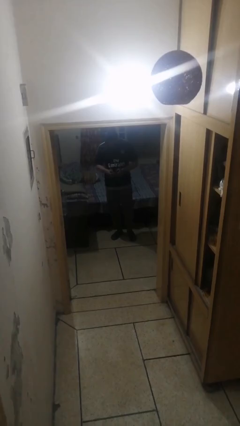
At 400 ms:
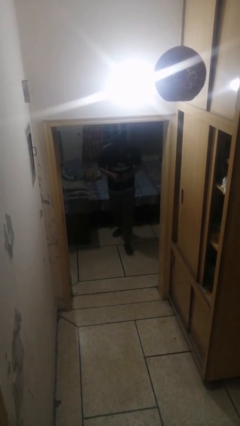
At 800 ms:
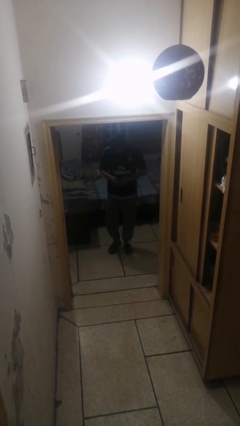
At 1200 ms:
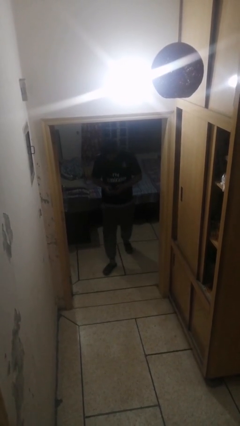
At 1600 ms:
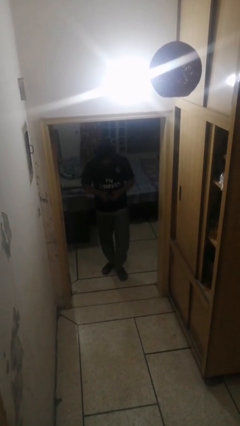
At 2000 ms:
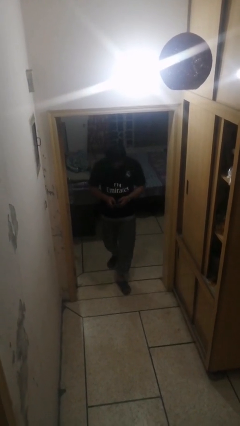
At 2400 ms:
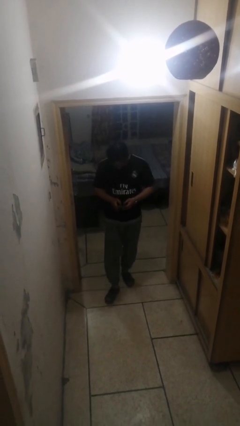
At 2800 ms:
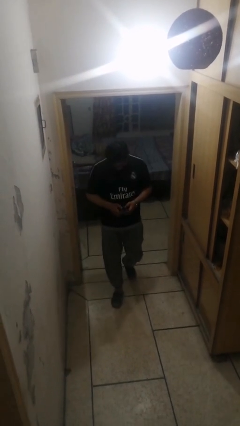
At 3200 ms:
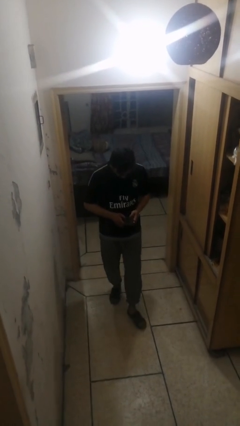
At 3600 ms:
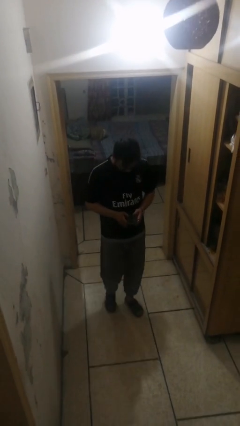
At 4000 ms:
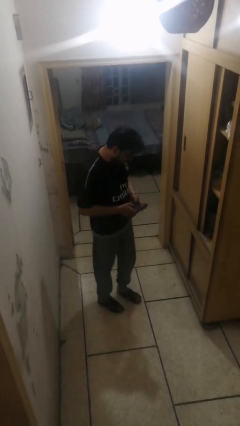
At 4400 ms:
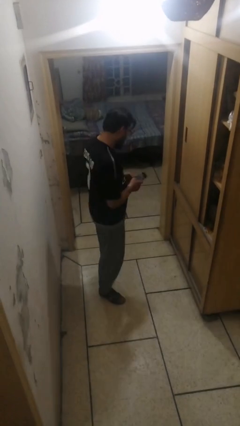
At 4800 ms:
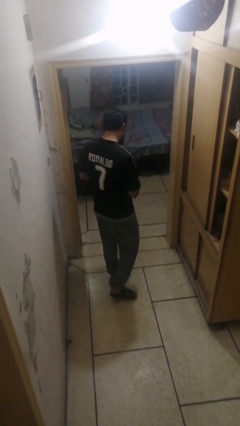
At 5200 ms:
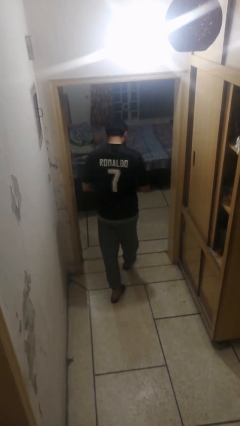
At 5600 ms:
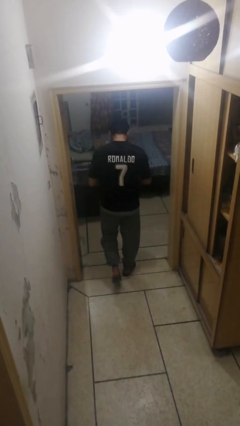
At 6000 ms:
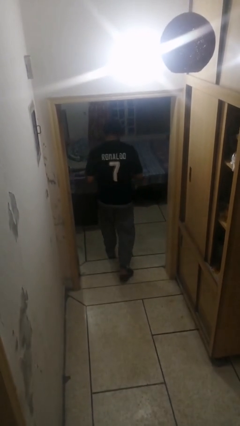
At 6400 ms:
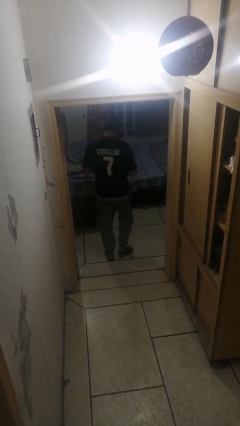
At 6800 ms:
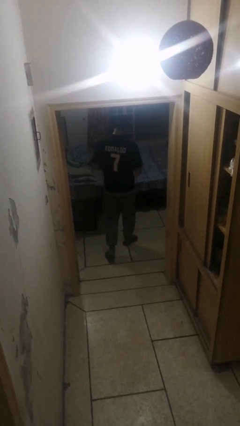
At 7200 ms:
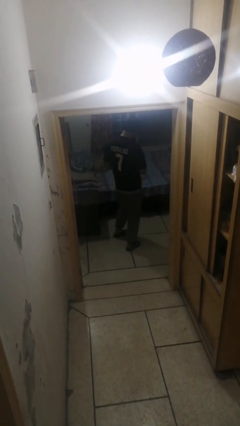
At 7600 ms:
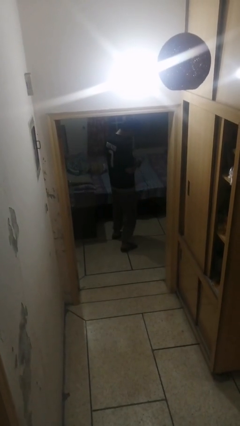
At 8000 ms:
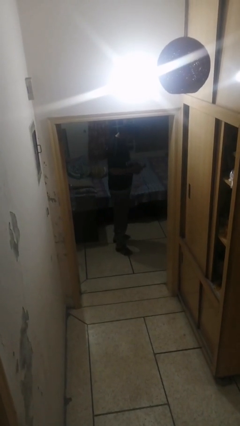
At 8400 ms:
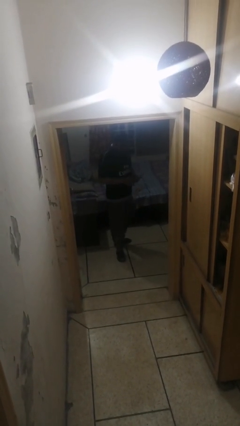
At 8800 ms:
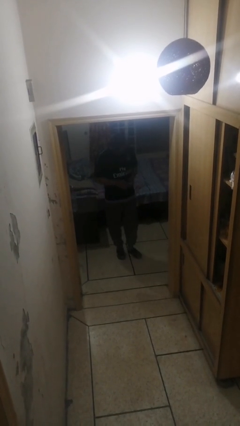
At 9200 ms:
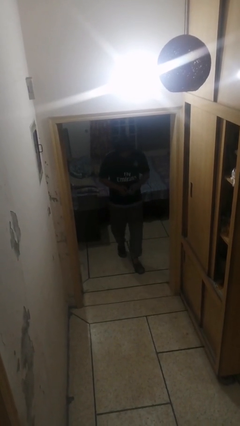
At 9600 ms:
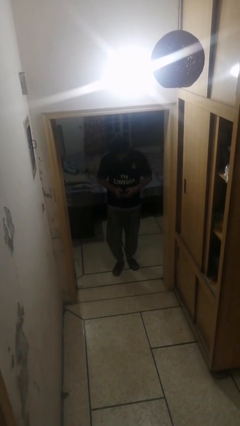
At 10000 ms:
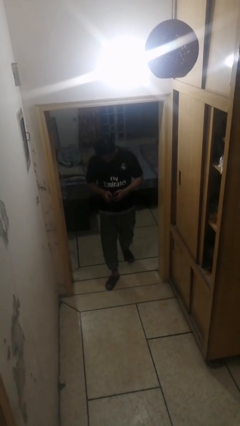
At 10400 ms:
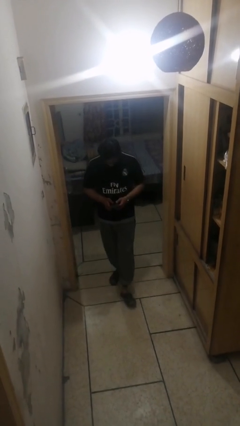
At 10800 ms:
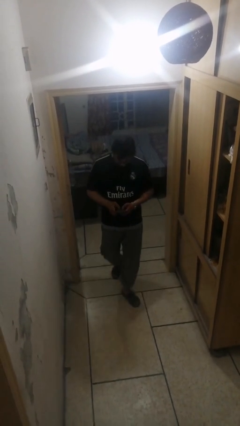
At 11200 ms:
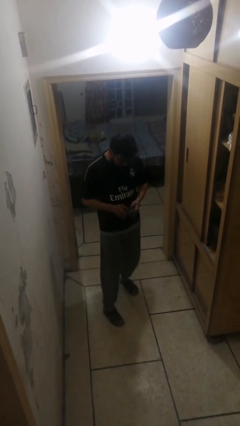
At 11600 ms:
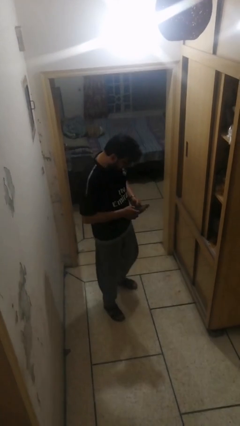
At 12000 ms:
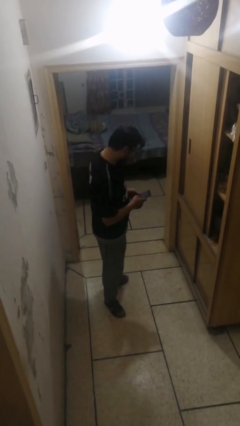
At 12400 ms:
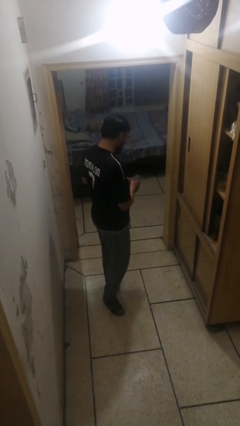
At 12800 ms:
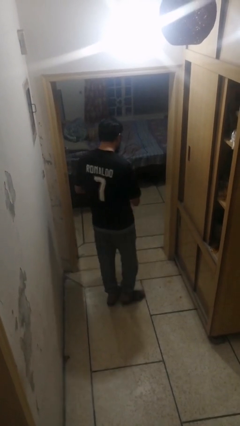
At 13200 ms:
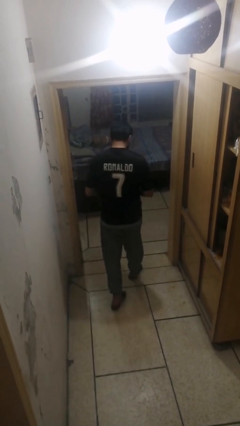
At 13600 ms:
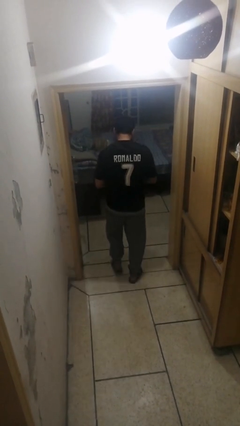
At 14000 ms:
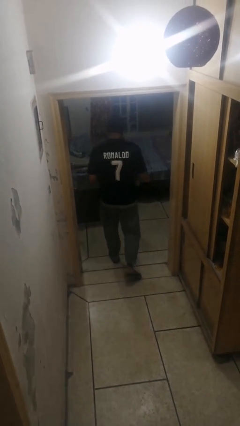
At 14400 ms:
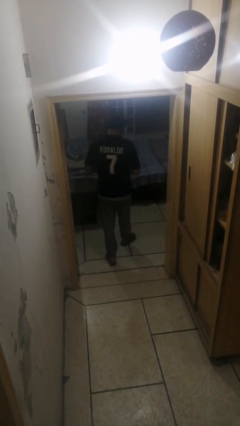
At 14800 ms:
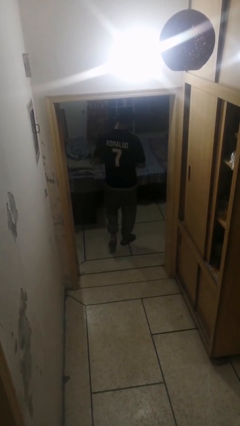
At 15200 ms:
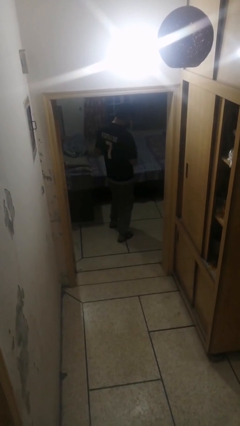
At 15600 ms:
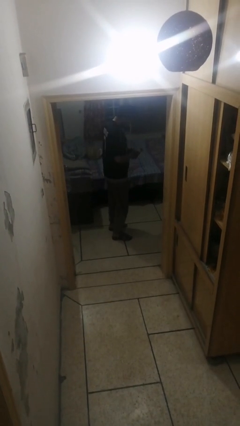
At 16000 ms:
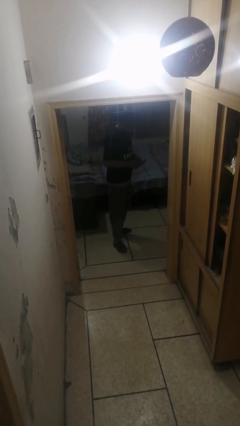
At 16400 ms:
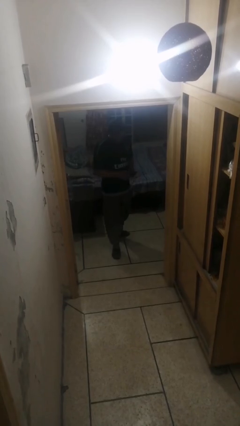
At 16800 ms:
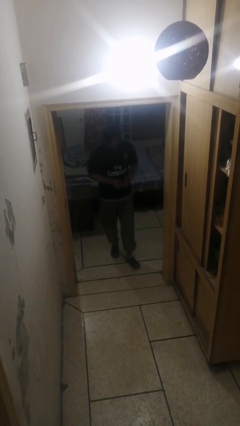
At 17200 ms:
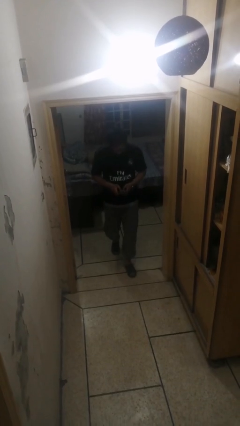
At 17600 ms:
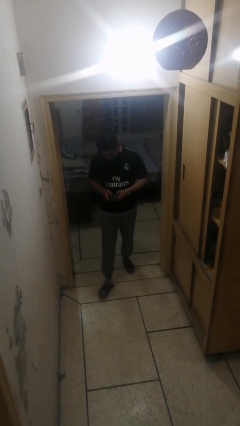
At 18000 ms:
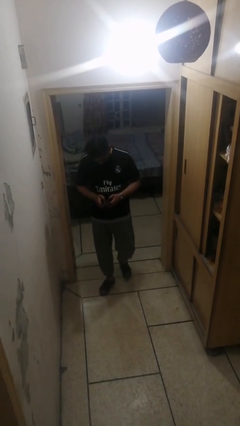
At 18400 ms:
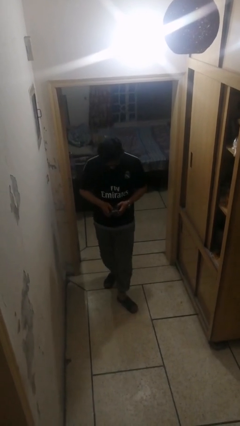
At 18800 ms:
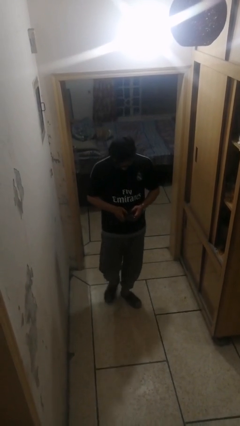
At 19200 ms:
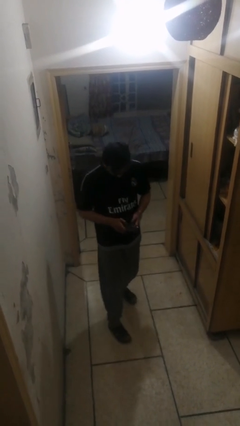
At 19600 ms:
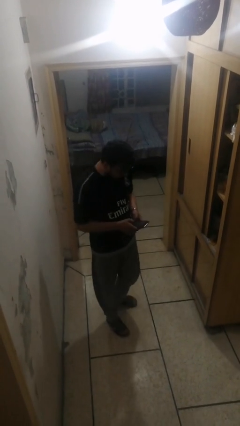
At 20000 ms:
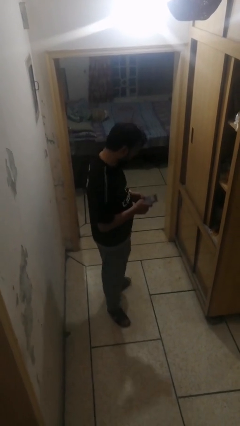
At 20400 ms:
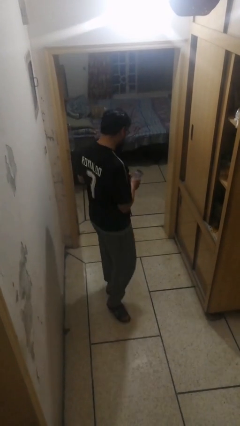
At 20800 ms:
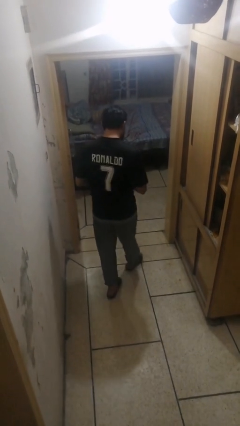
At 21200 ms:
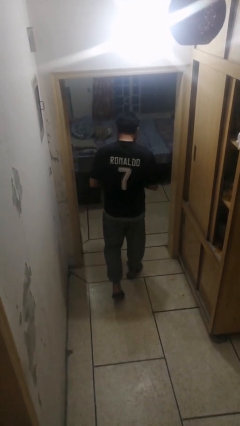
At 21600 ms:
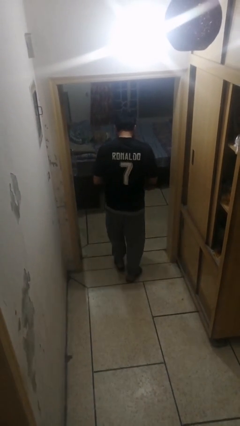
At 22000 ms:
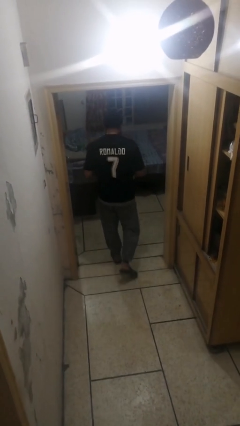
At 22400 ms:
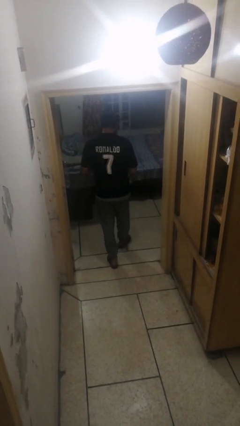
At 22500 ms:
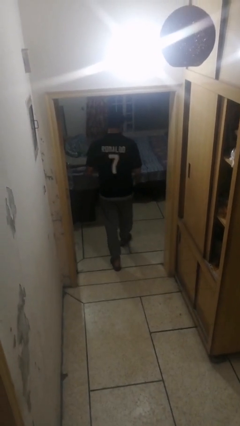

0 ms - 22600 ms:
person texts on phone

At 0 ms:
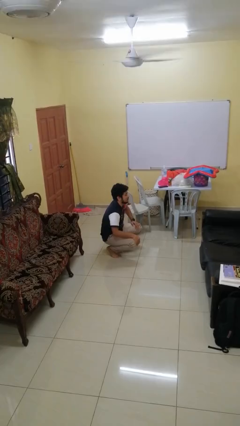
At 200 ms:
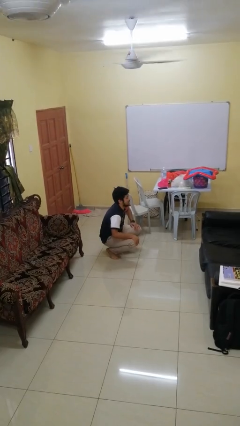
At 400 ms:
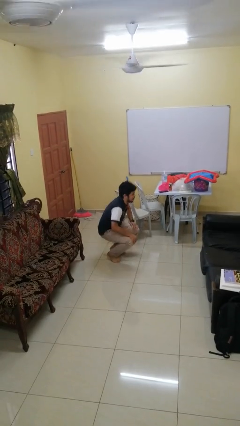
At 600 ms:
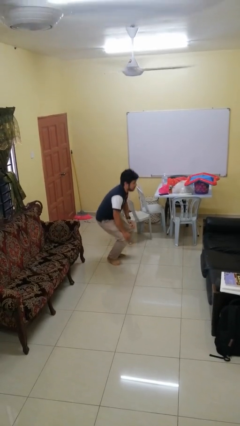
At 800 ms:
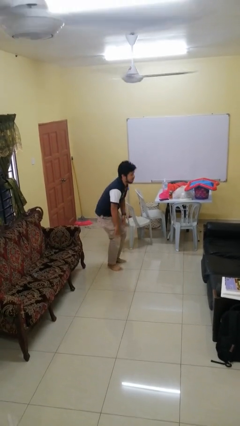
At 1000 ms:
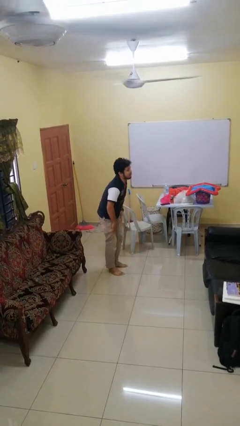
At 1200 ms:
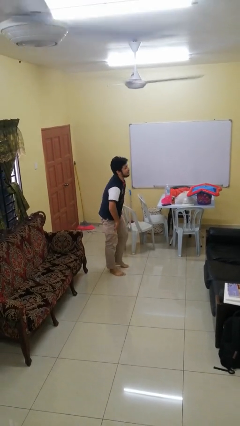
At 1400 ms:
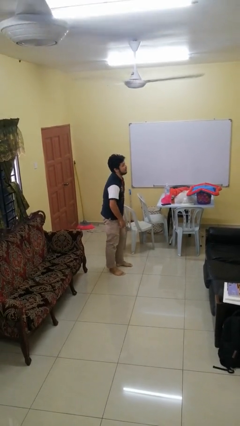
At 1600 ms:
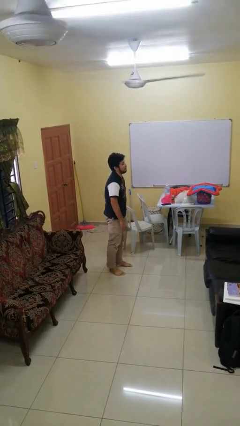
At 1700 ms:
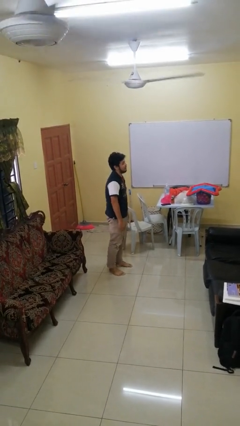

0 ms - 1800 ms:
person stands up

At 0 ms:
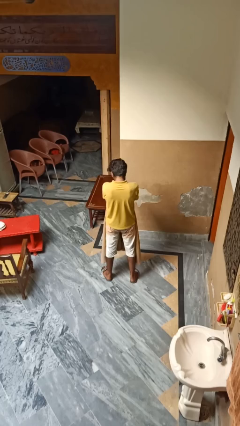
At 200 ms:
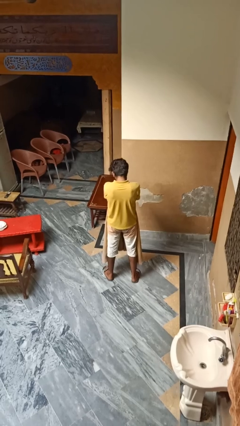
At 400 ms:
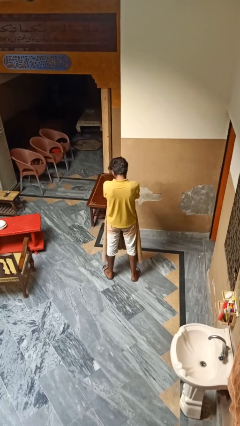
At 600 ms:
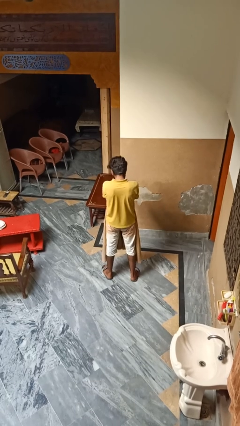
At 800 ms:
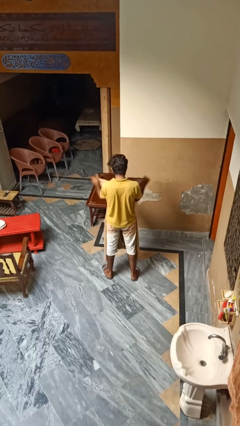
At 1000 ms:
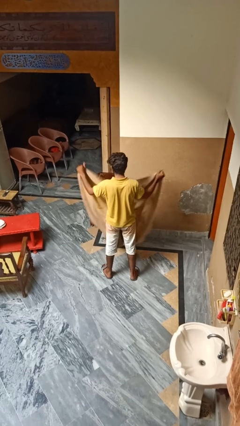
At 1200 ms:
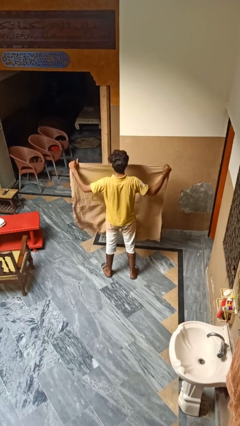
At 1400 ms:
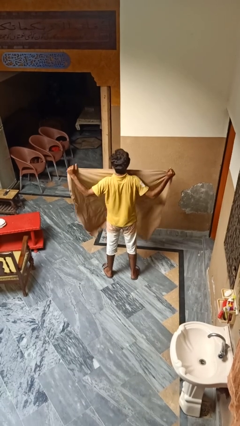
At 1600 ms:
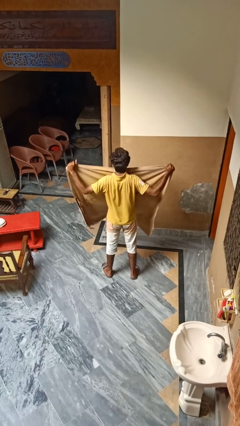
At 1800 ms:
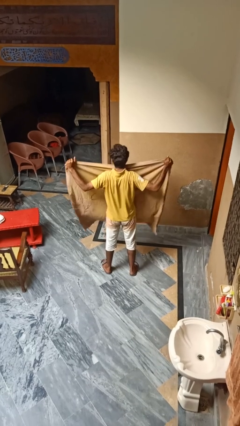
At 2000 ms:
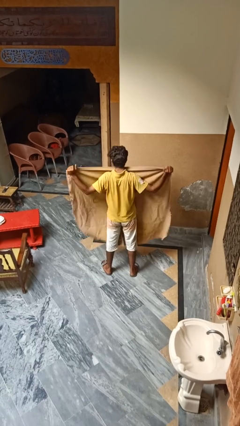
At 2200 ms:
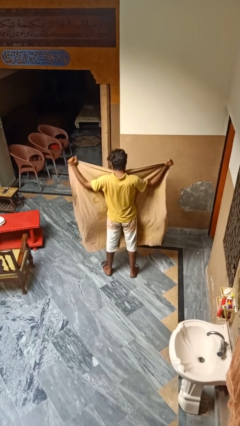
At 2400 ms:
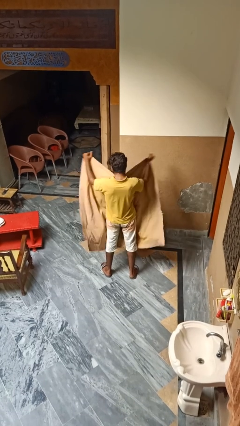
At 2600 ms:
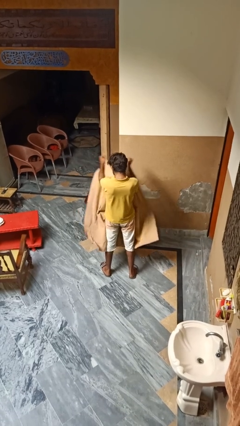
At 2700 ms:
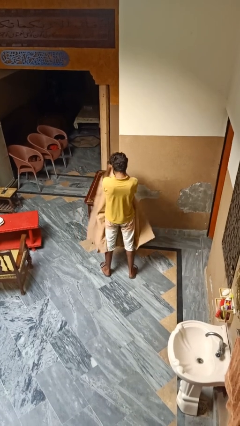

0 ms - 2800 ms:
person folds blanket

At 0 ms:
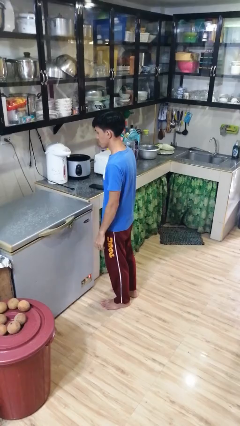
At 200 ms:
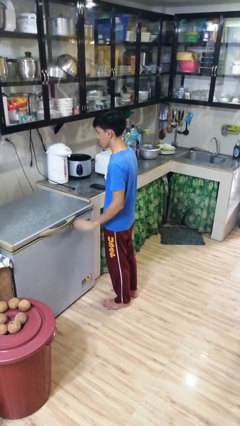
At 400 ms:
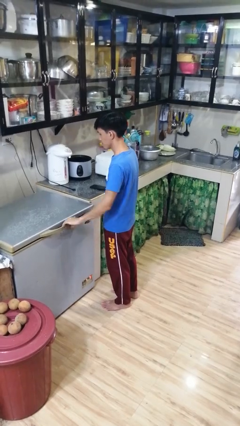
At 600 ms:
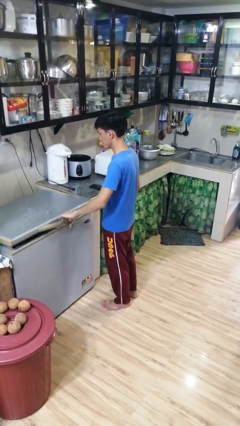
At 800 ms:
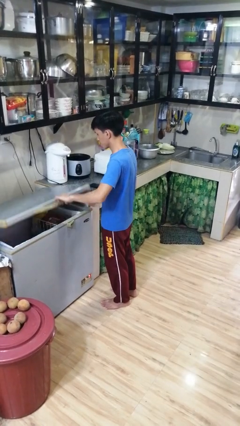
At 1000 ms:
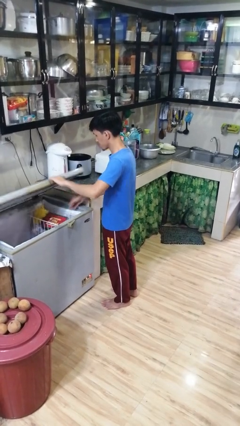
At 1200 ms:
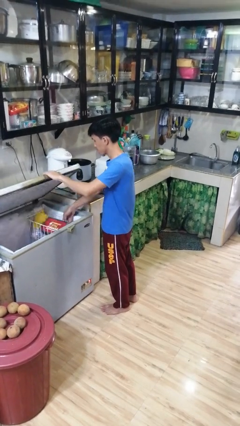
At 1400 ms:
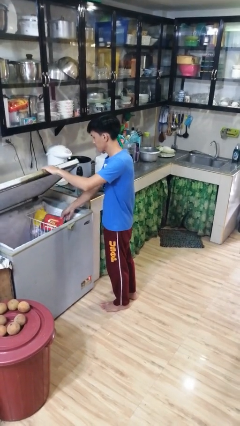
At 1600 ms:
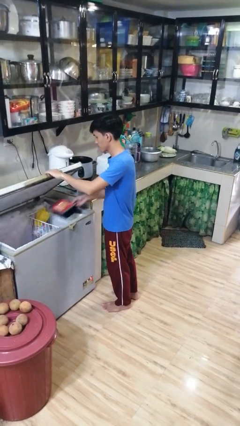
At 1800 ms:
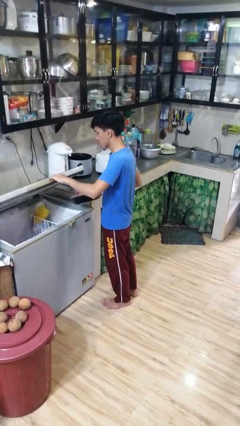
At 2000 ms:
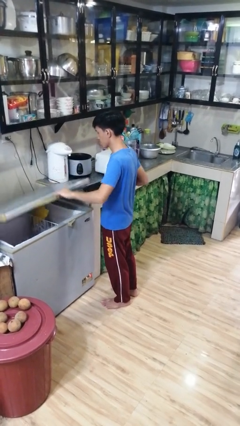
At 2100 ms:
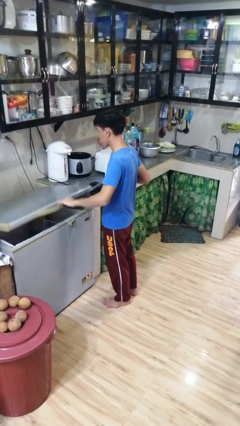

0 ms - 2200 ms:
person takes object from refrigerator
